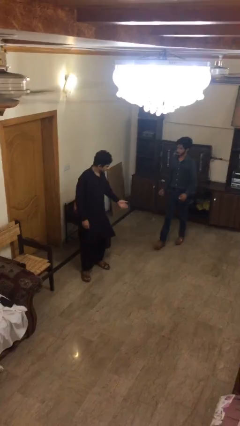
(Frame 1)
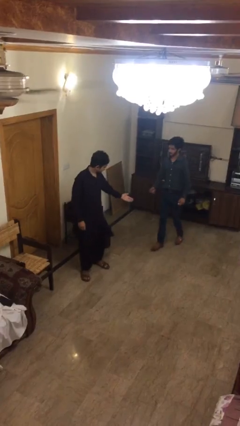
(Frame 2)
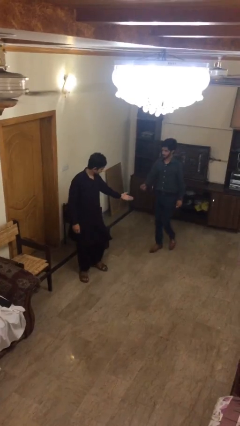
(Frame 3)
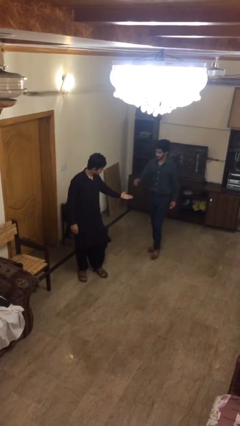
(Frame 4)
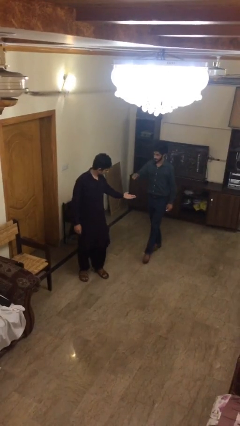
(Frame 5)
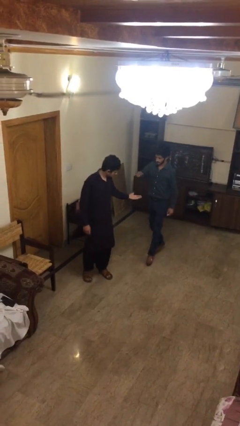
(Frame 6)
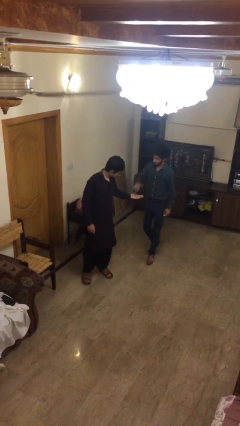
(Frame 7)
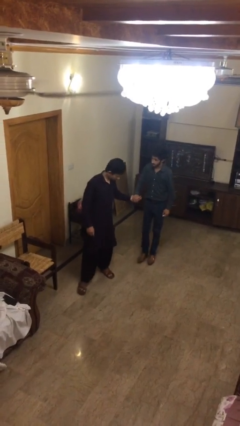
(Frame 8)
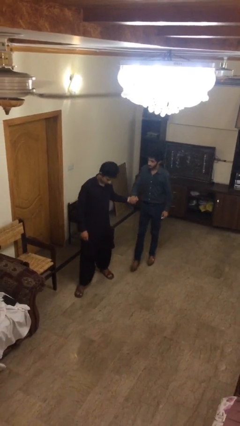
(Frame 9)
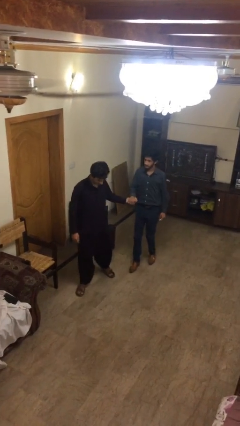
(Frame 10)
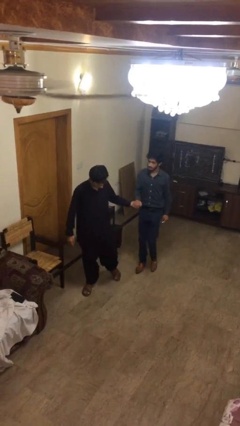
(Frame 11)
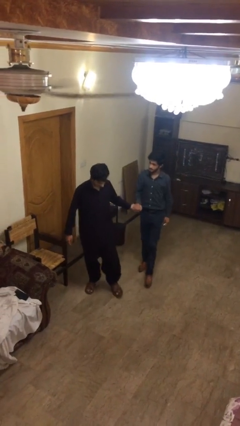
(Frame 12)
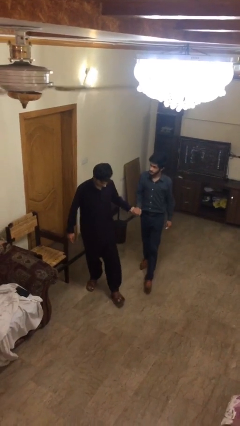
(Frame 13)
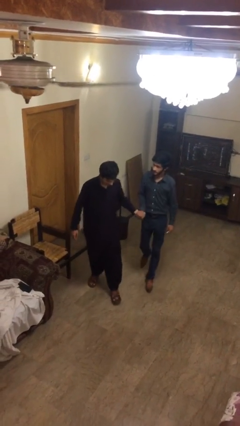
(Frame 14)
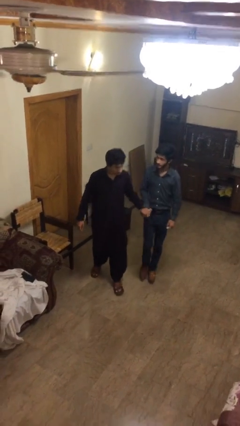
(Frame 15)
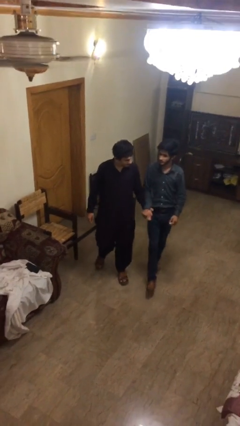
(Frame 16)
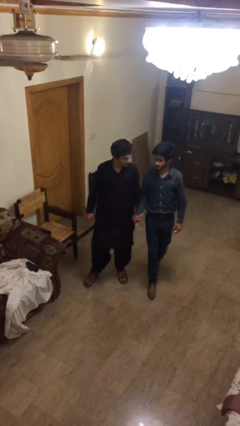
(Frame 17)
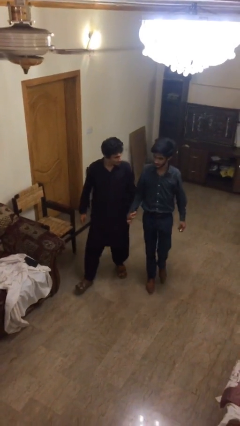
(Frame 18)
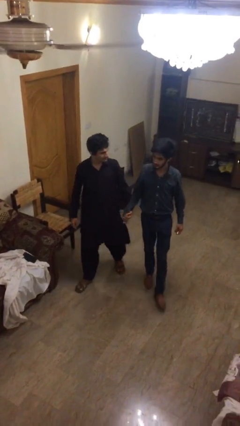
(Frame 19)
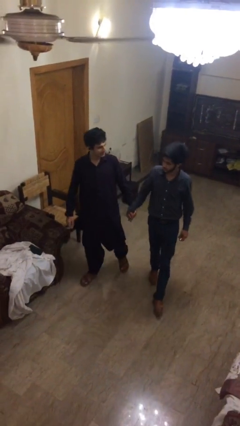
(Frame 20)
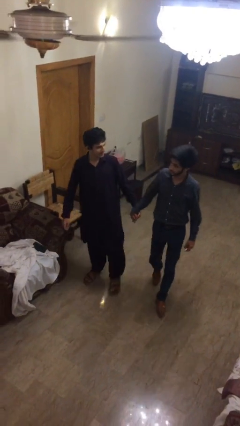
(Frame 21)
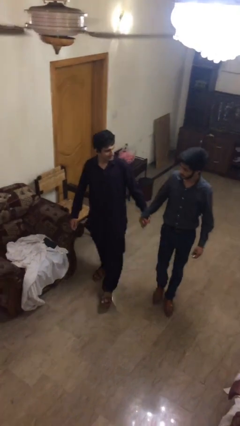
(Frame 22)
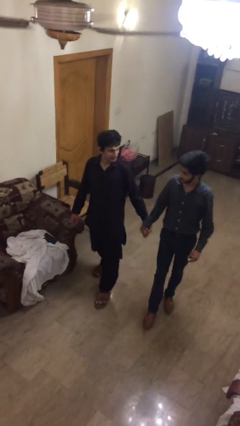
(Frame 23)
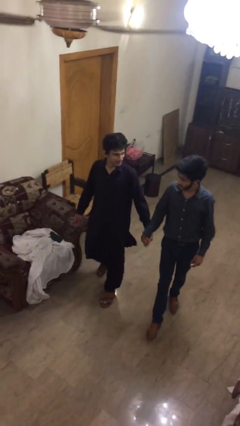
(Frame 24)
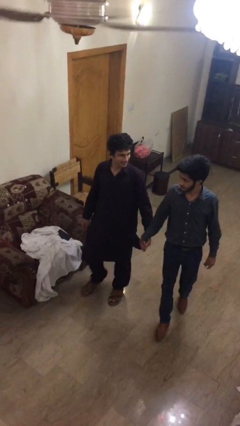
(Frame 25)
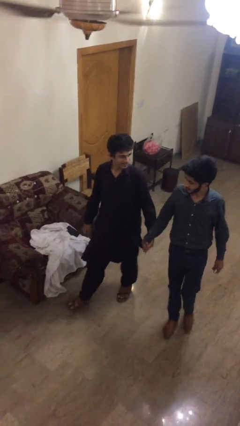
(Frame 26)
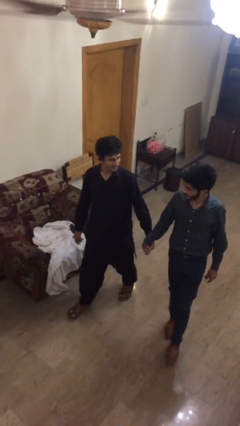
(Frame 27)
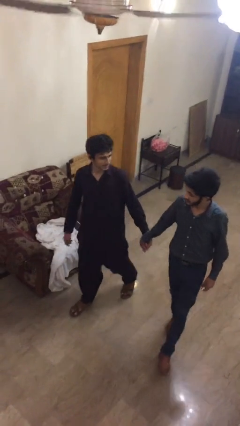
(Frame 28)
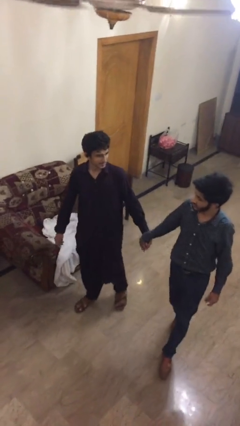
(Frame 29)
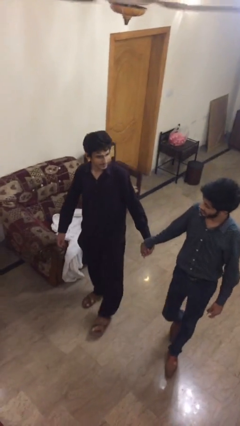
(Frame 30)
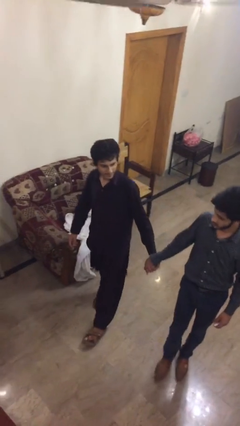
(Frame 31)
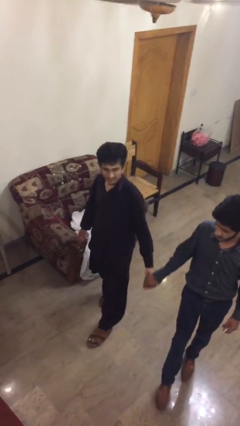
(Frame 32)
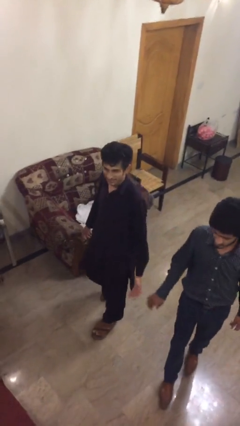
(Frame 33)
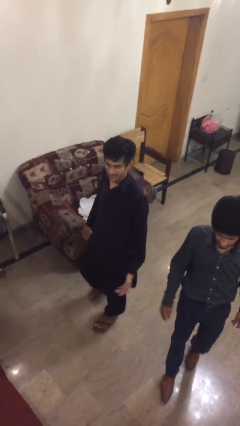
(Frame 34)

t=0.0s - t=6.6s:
person holds hand

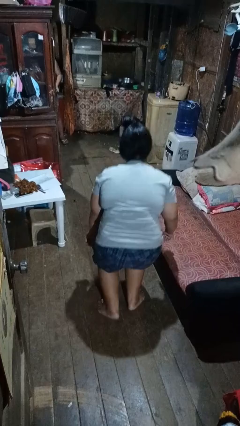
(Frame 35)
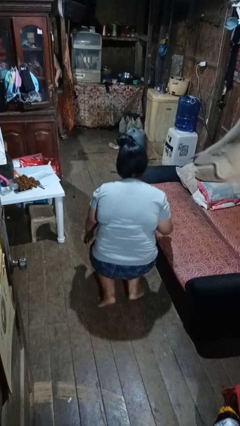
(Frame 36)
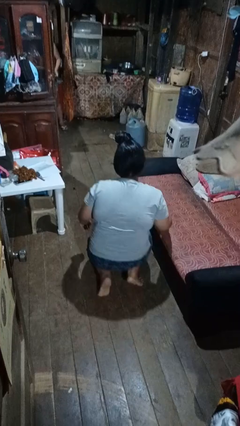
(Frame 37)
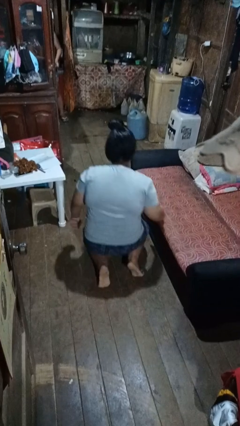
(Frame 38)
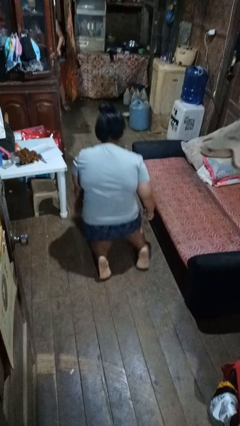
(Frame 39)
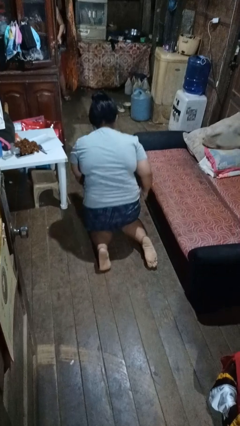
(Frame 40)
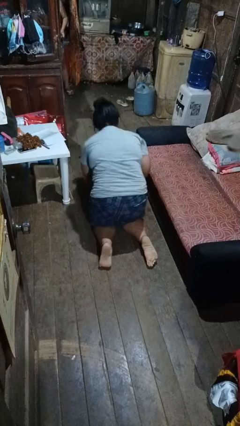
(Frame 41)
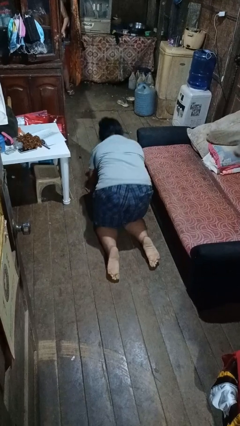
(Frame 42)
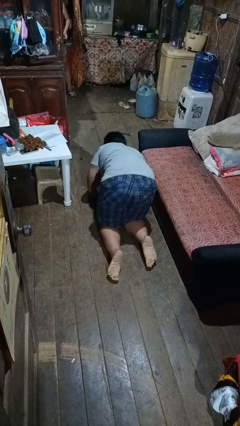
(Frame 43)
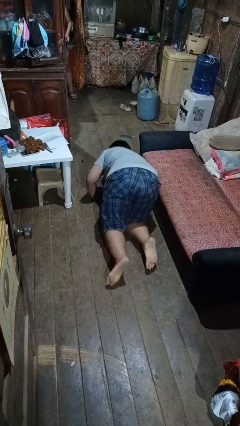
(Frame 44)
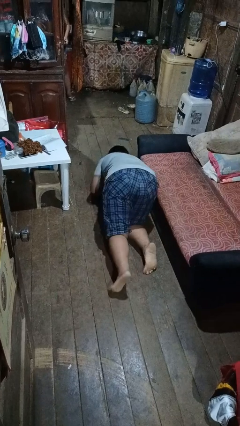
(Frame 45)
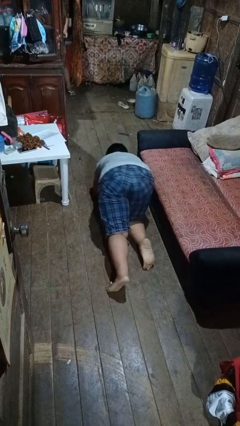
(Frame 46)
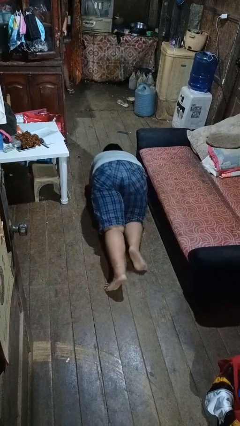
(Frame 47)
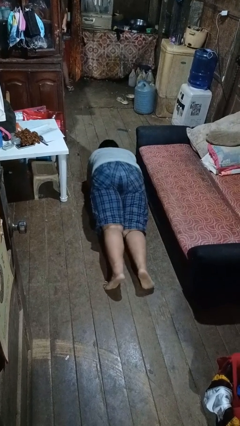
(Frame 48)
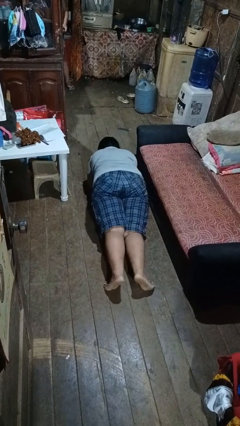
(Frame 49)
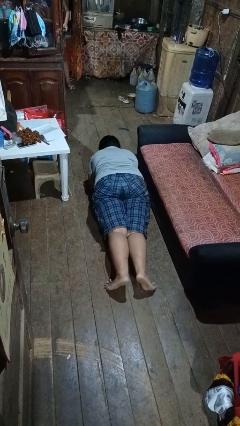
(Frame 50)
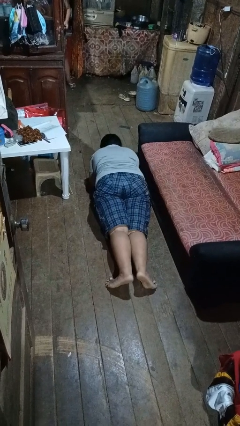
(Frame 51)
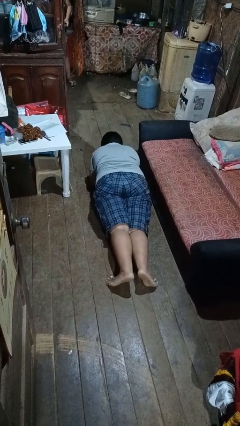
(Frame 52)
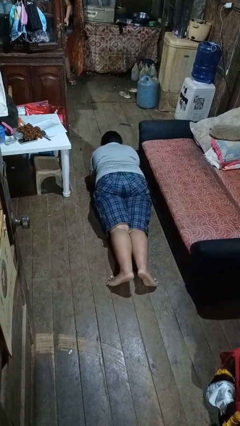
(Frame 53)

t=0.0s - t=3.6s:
person exercises with plank

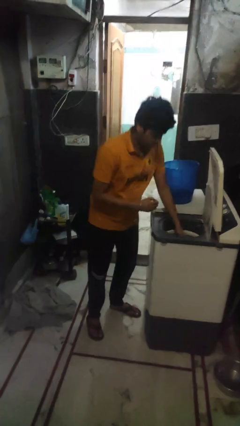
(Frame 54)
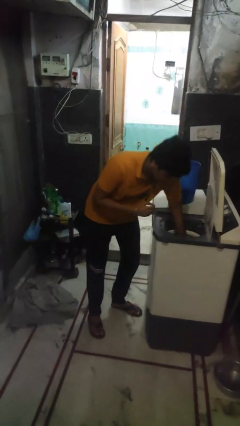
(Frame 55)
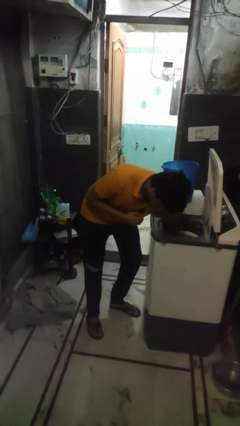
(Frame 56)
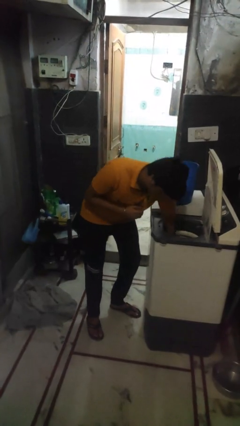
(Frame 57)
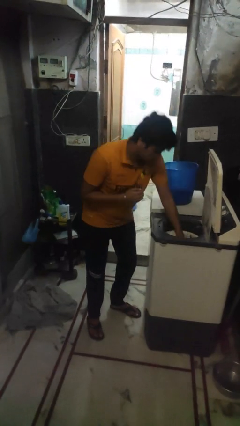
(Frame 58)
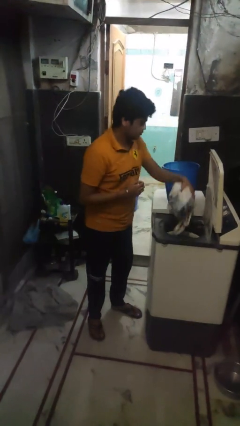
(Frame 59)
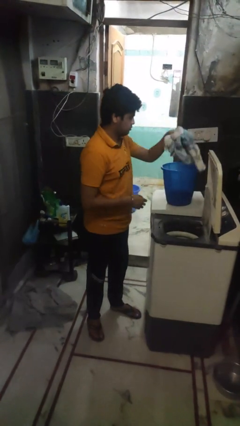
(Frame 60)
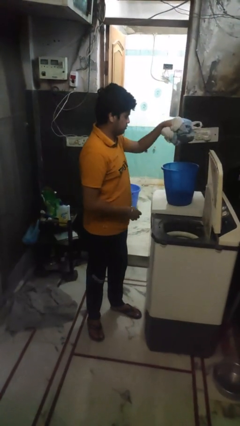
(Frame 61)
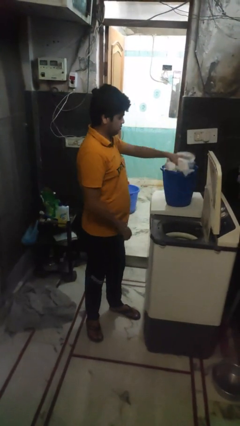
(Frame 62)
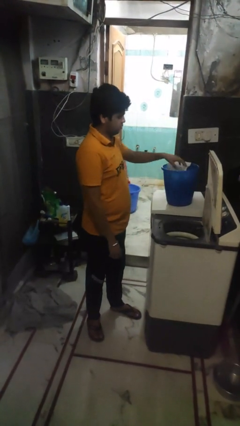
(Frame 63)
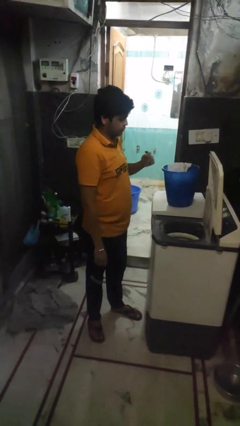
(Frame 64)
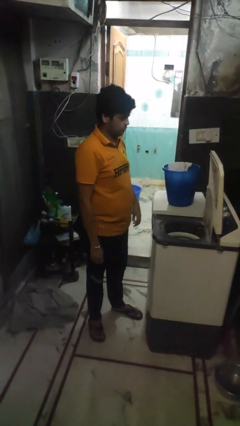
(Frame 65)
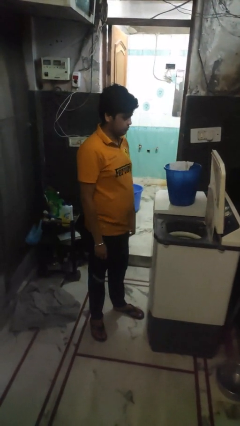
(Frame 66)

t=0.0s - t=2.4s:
person unloads clotheswasher

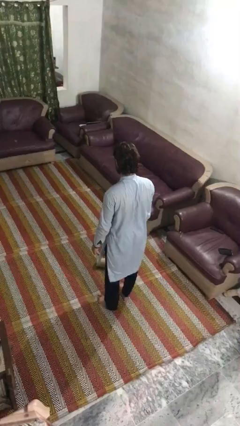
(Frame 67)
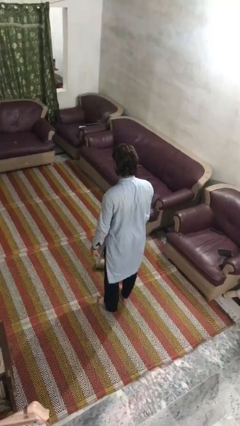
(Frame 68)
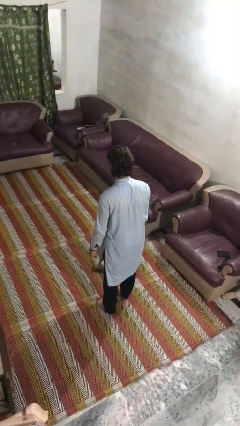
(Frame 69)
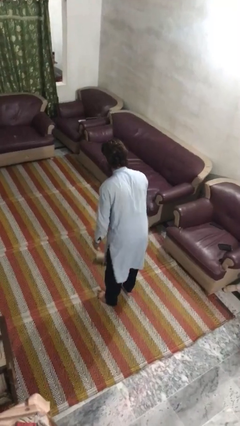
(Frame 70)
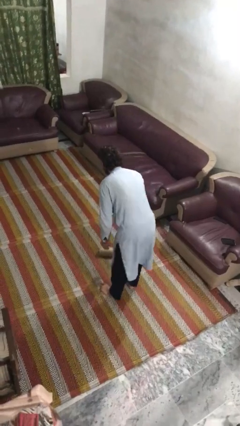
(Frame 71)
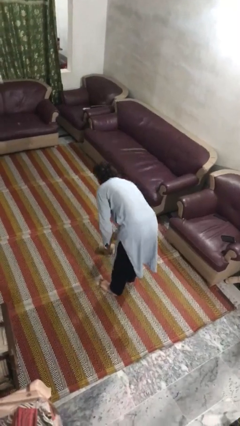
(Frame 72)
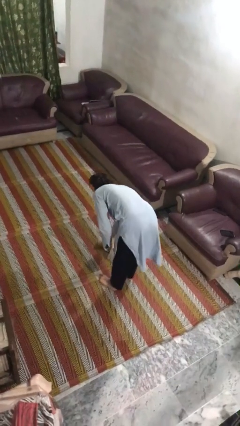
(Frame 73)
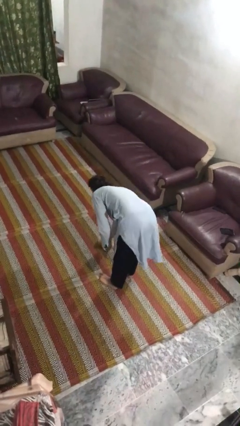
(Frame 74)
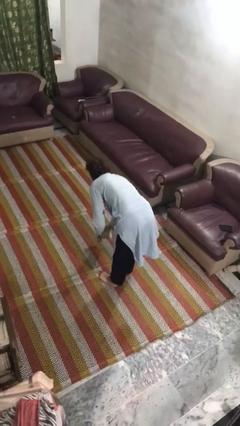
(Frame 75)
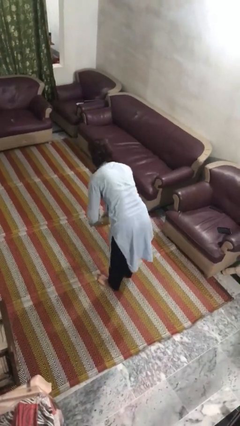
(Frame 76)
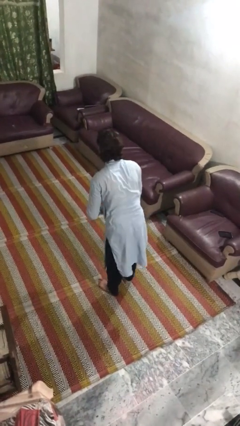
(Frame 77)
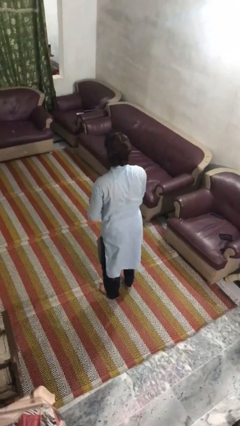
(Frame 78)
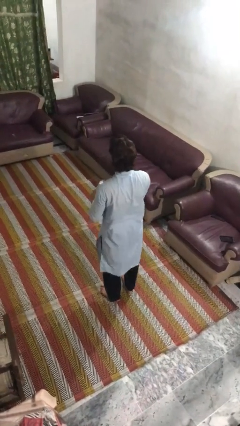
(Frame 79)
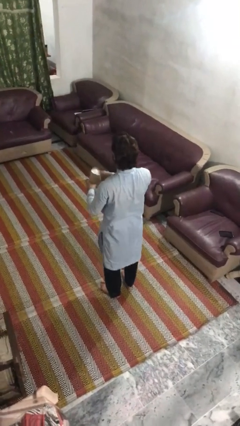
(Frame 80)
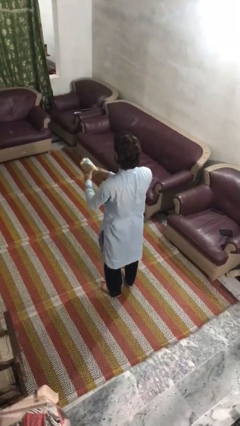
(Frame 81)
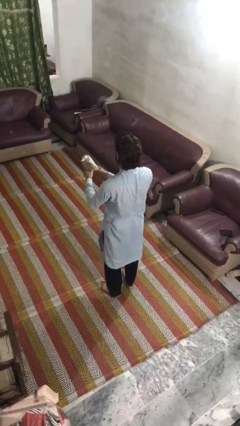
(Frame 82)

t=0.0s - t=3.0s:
person picks up object from floor

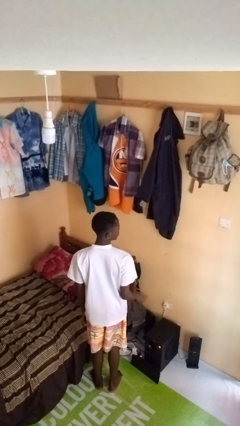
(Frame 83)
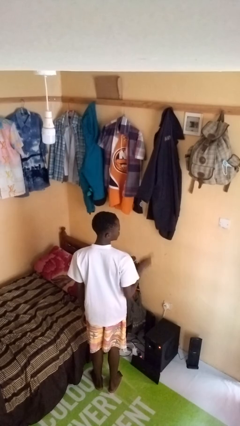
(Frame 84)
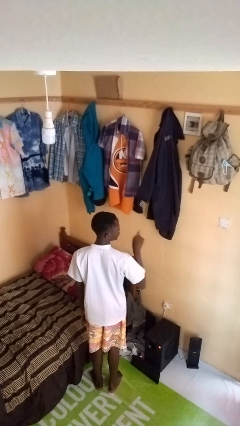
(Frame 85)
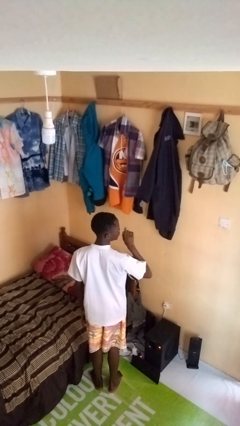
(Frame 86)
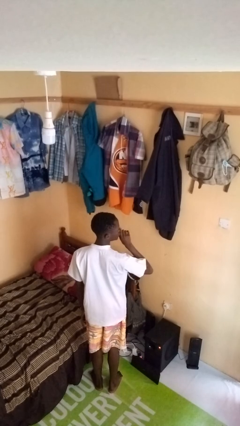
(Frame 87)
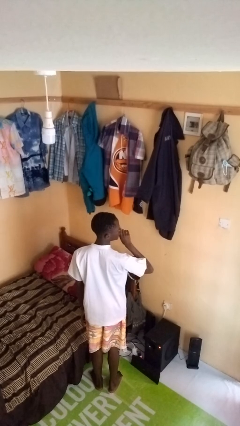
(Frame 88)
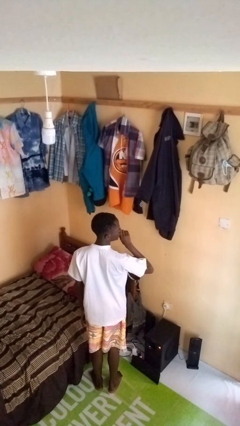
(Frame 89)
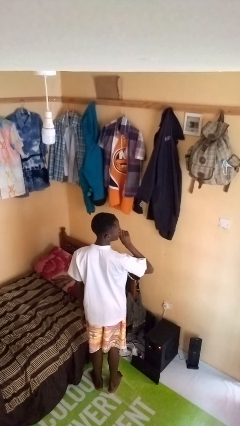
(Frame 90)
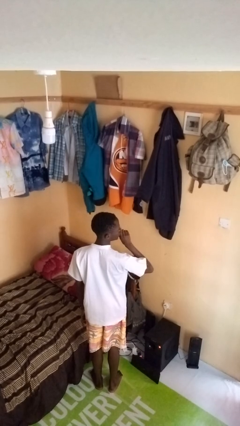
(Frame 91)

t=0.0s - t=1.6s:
person gestures be quiet
